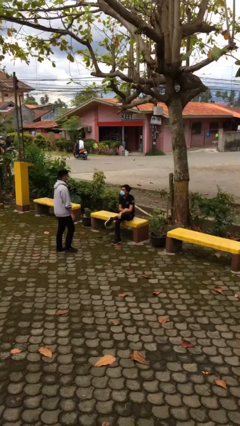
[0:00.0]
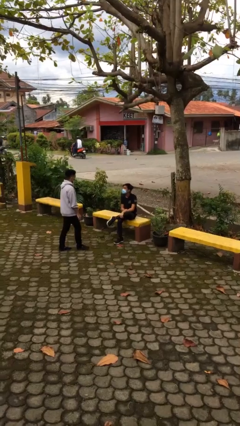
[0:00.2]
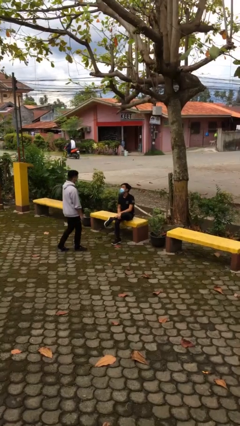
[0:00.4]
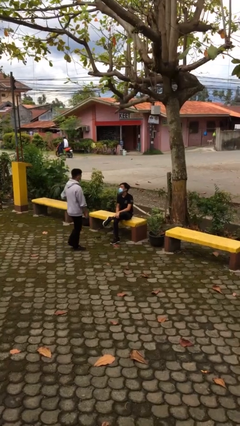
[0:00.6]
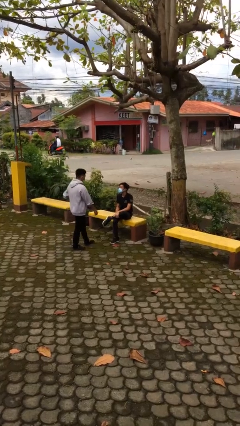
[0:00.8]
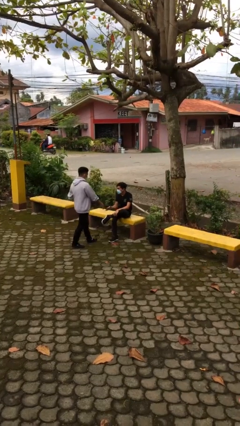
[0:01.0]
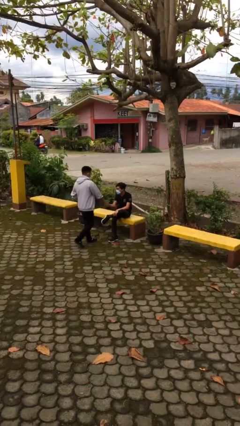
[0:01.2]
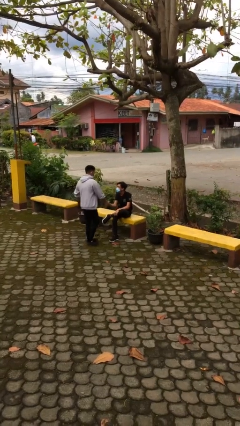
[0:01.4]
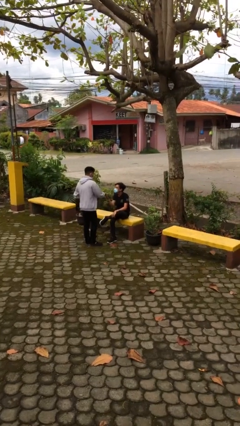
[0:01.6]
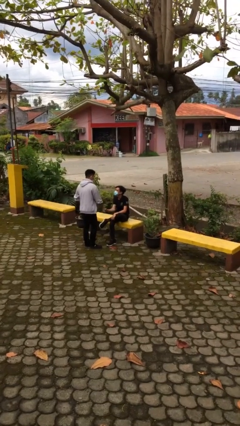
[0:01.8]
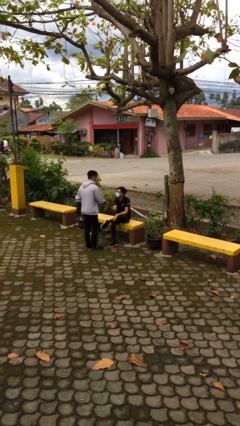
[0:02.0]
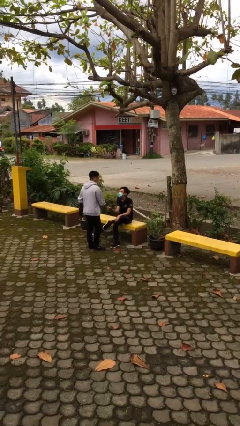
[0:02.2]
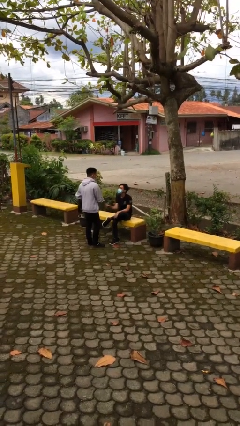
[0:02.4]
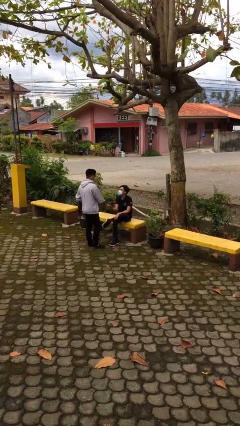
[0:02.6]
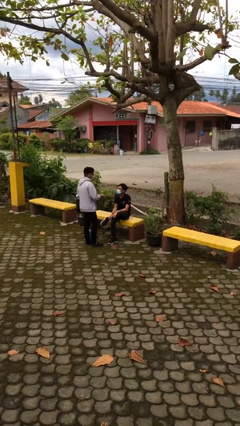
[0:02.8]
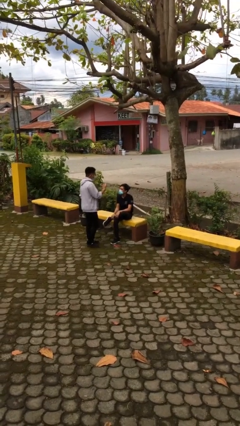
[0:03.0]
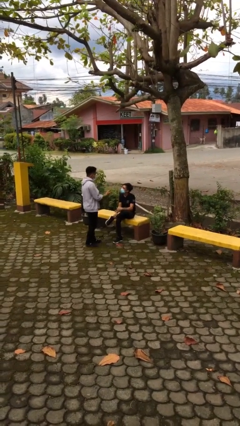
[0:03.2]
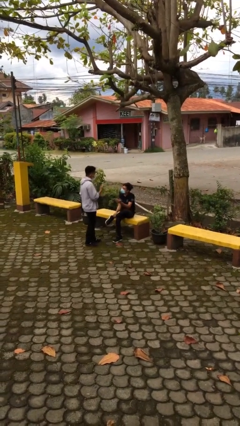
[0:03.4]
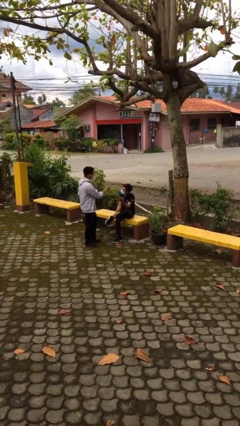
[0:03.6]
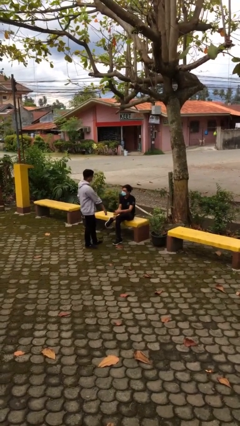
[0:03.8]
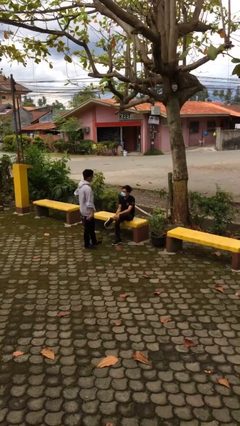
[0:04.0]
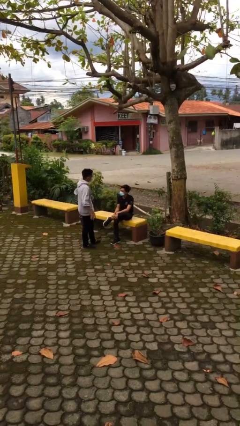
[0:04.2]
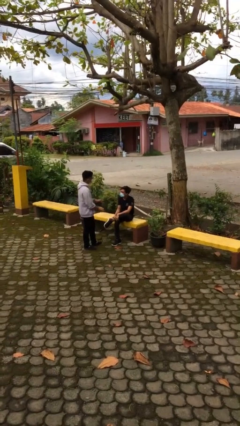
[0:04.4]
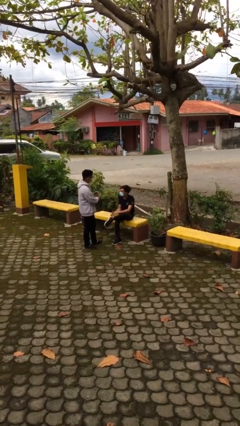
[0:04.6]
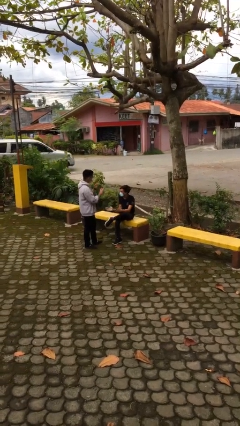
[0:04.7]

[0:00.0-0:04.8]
person shakes hand

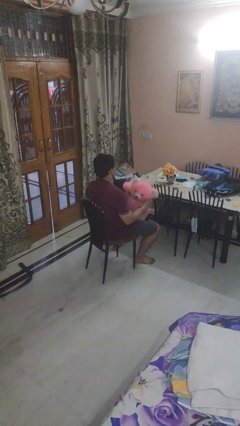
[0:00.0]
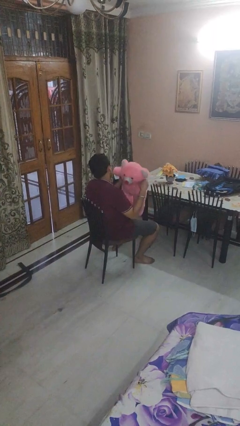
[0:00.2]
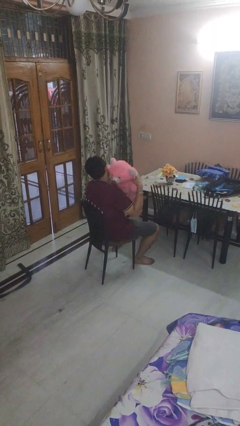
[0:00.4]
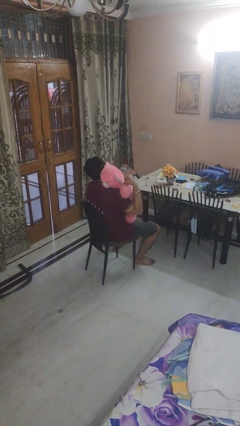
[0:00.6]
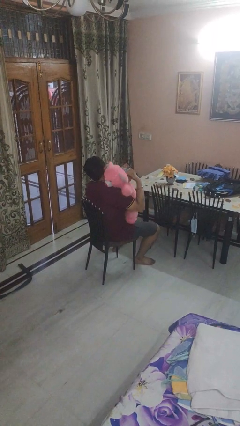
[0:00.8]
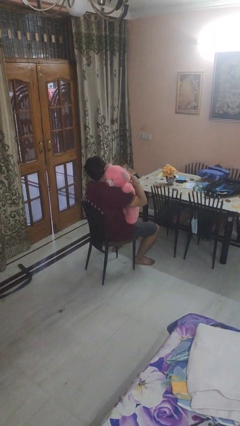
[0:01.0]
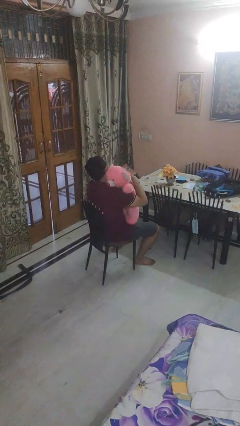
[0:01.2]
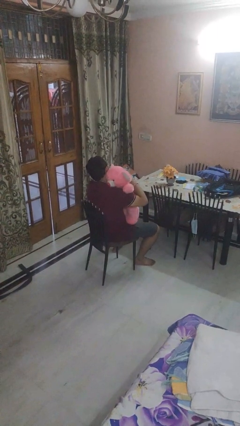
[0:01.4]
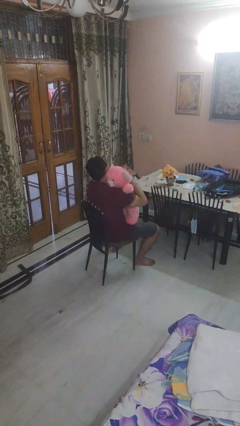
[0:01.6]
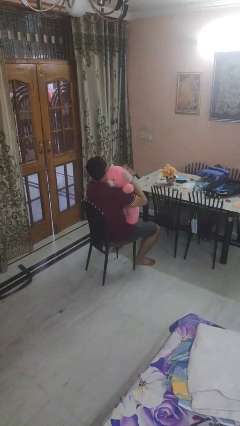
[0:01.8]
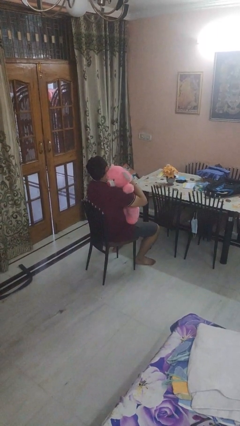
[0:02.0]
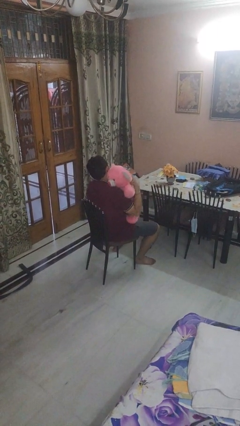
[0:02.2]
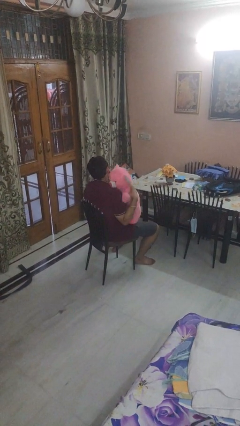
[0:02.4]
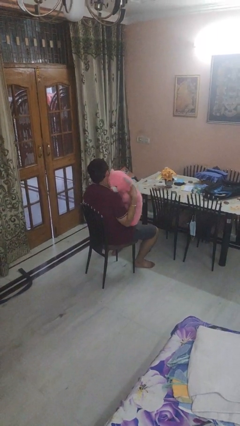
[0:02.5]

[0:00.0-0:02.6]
person hugs stuffed animal

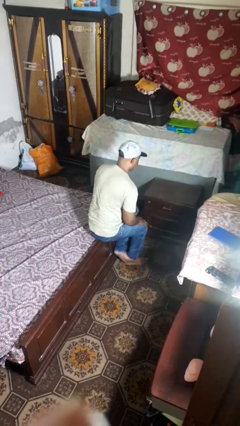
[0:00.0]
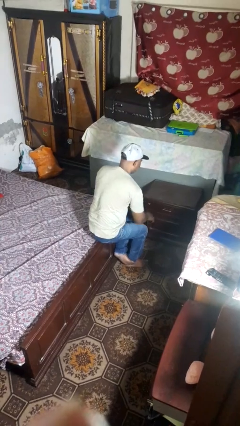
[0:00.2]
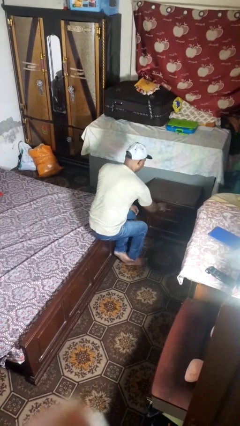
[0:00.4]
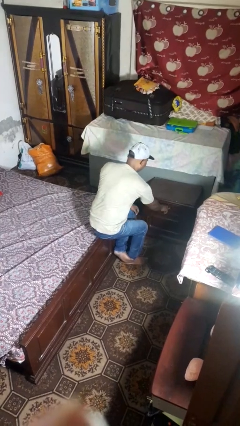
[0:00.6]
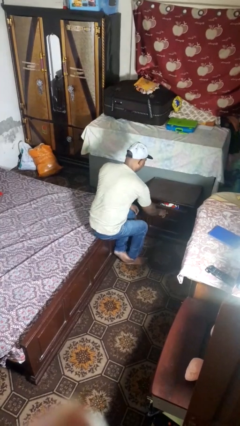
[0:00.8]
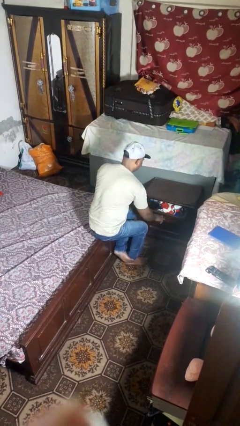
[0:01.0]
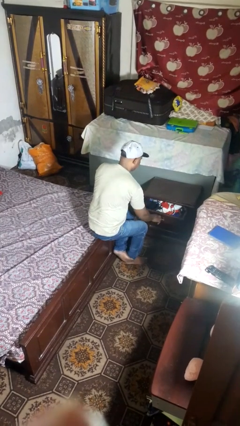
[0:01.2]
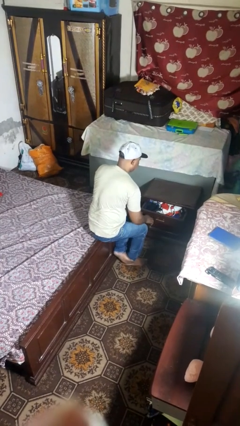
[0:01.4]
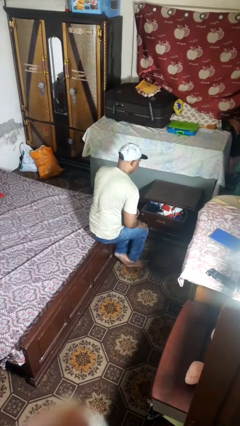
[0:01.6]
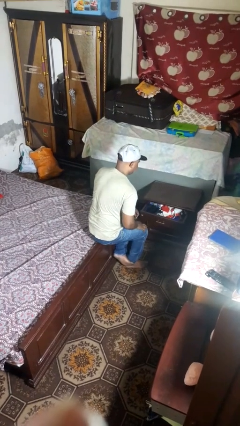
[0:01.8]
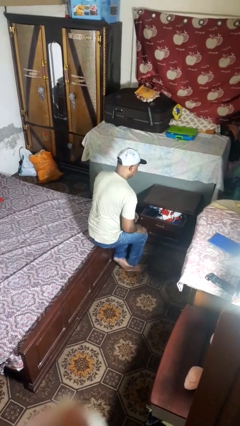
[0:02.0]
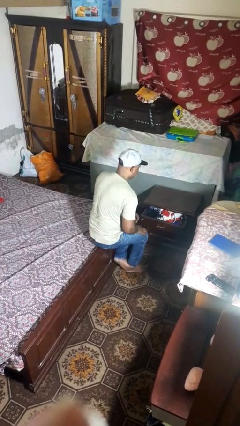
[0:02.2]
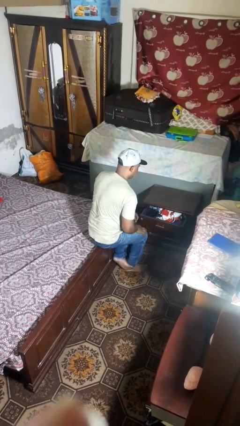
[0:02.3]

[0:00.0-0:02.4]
person opens dresser drawer

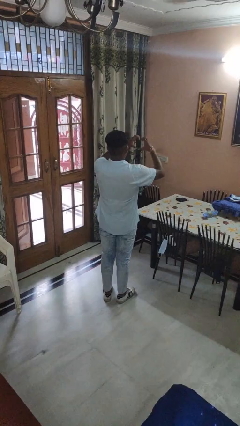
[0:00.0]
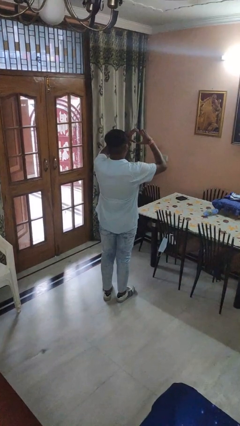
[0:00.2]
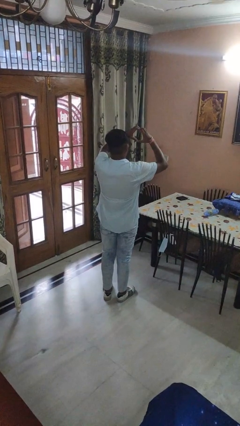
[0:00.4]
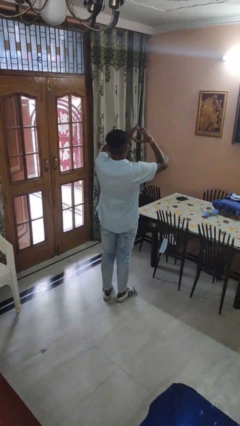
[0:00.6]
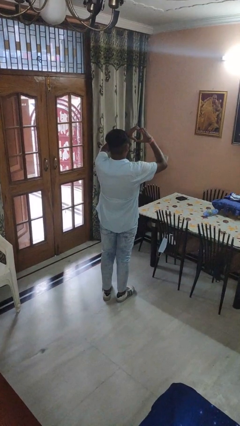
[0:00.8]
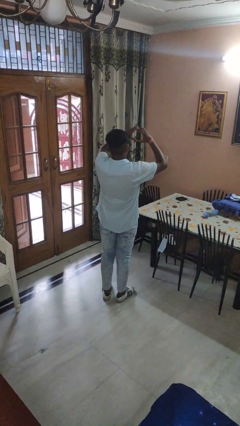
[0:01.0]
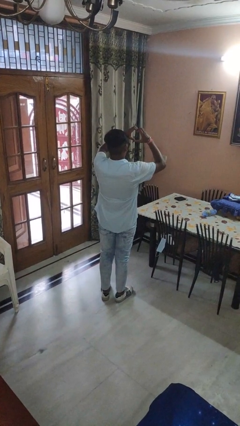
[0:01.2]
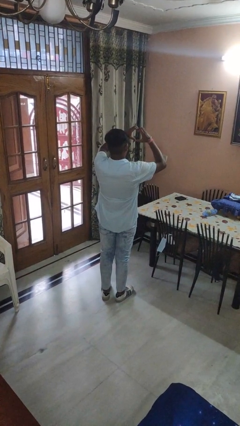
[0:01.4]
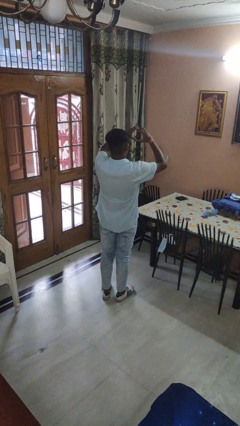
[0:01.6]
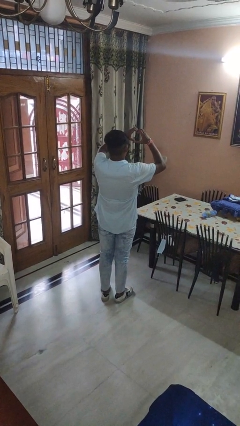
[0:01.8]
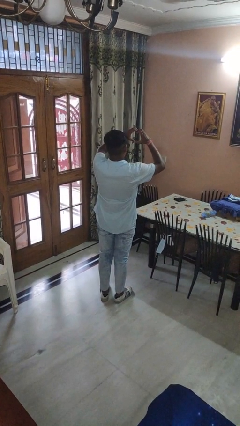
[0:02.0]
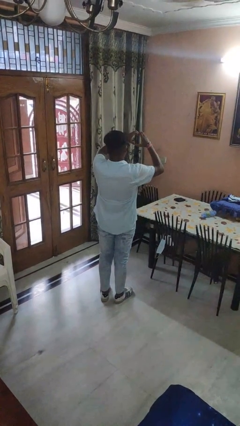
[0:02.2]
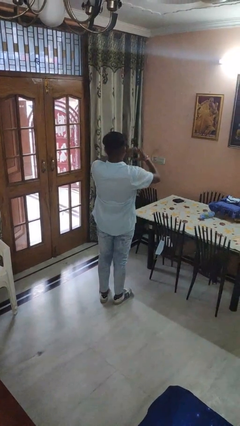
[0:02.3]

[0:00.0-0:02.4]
person gestures heart

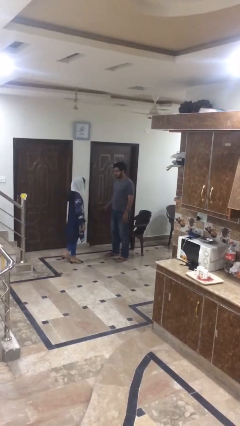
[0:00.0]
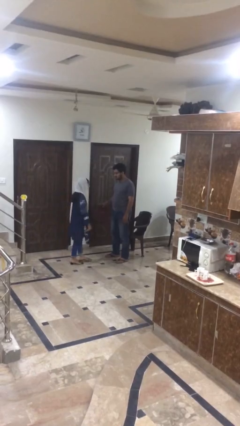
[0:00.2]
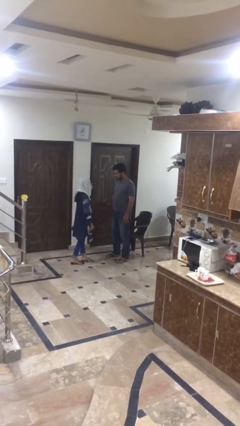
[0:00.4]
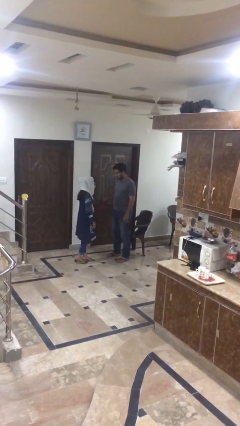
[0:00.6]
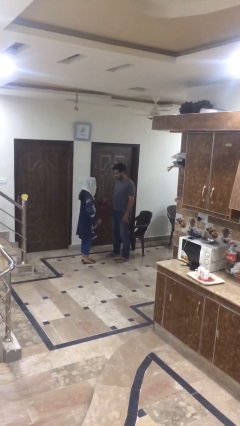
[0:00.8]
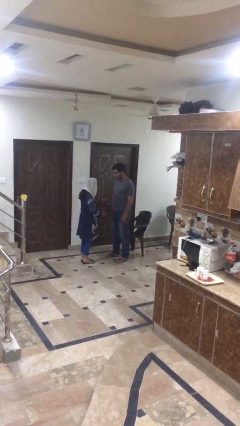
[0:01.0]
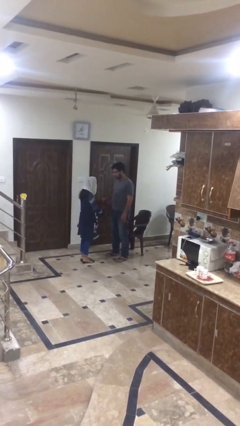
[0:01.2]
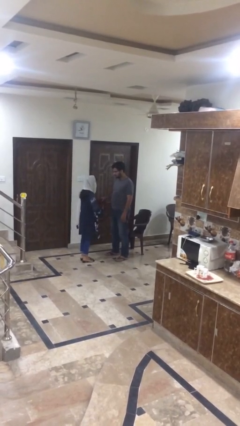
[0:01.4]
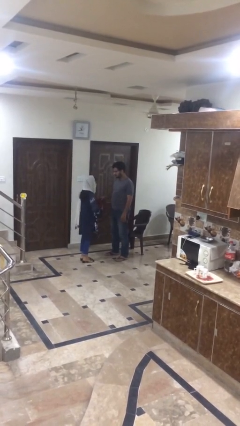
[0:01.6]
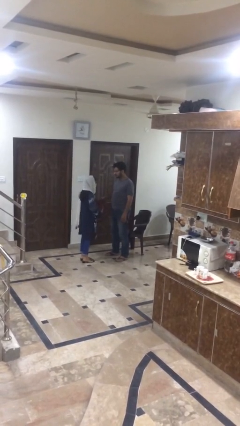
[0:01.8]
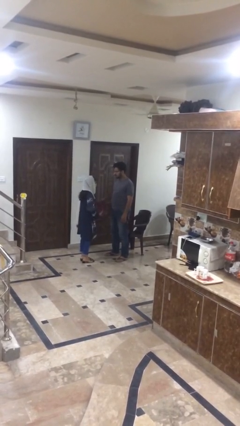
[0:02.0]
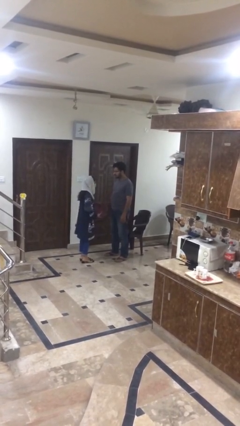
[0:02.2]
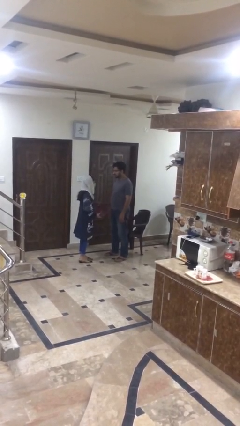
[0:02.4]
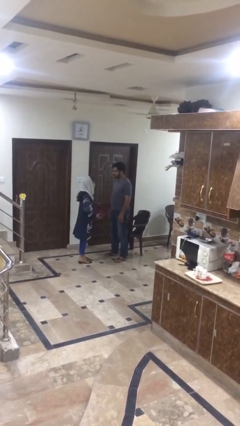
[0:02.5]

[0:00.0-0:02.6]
person transfers object to person

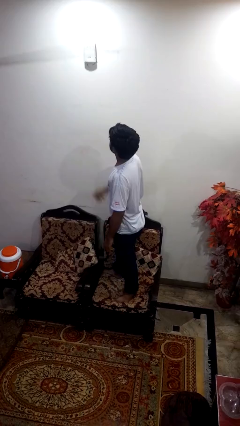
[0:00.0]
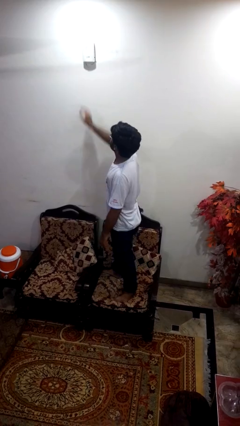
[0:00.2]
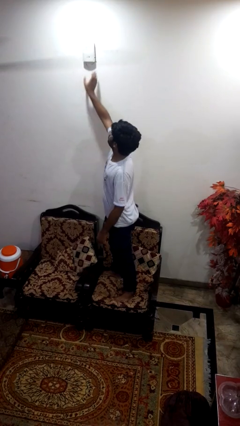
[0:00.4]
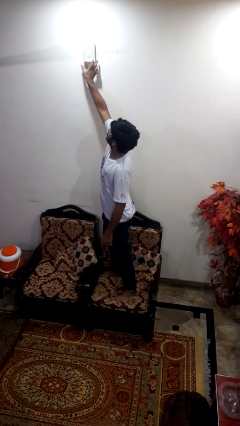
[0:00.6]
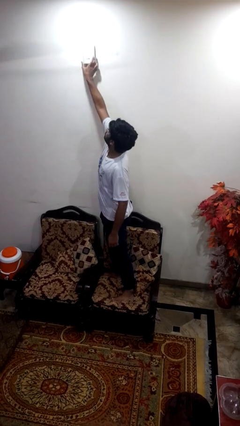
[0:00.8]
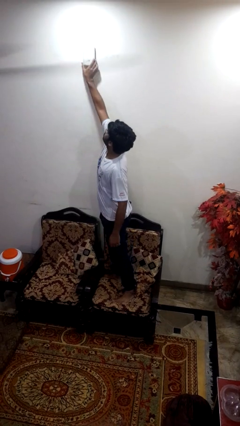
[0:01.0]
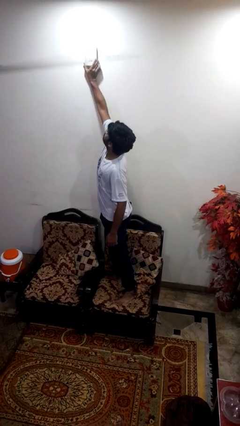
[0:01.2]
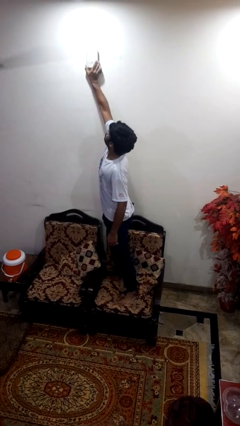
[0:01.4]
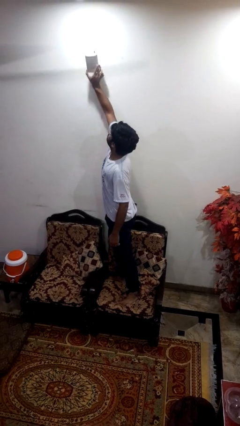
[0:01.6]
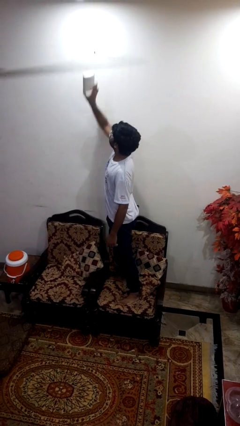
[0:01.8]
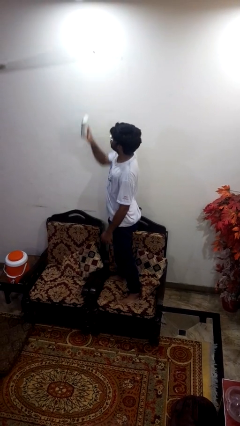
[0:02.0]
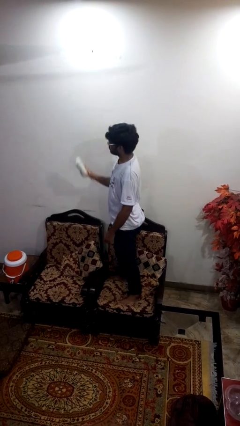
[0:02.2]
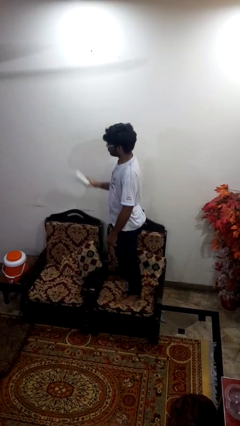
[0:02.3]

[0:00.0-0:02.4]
person takes down smoke detector
